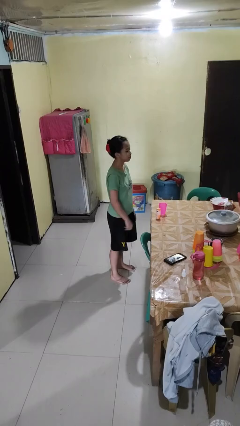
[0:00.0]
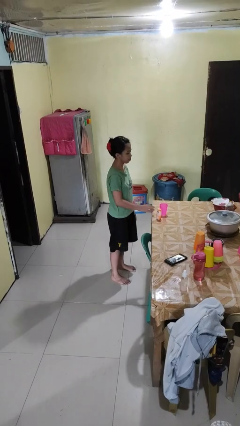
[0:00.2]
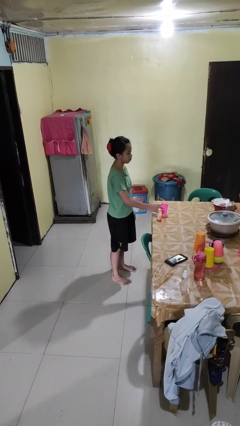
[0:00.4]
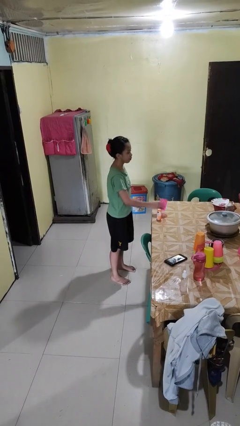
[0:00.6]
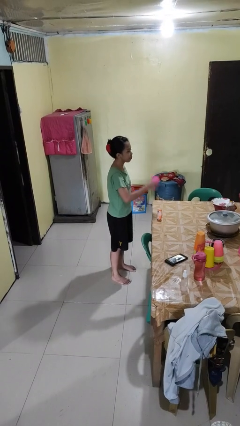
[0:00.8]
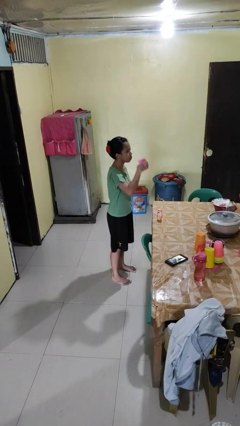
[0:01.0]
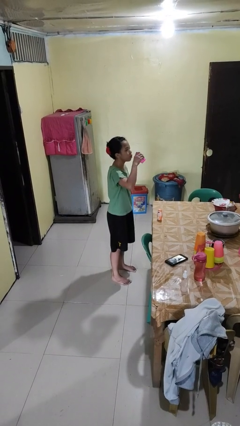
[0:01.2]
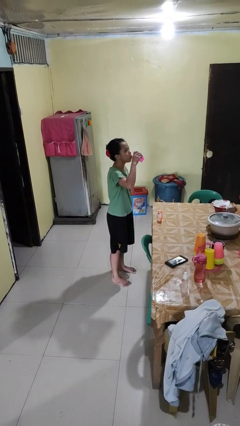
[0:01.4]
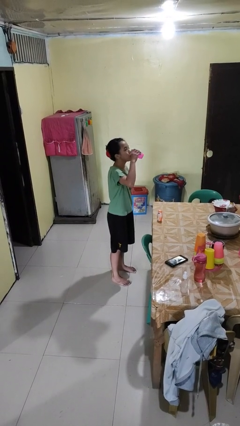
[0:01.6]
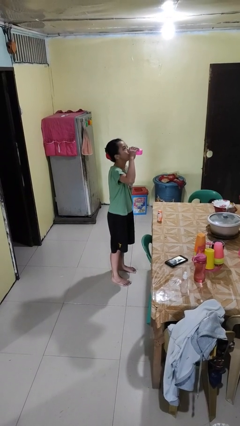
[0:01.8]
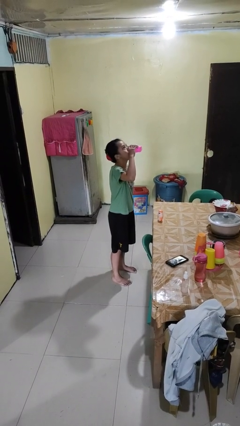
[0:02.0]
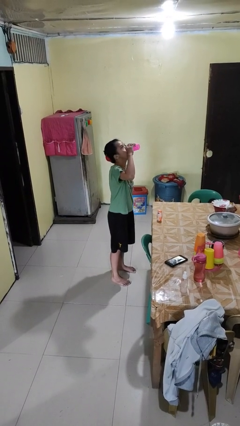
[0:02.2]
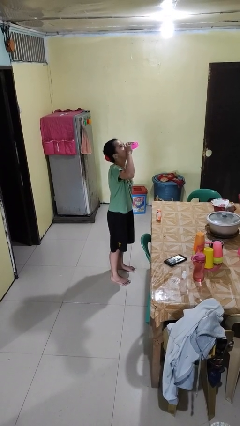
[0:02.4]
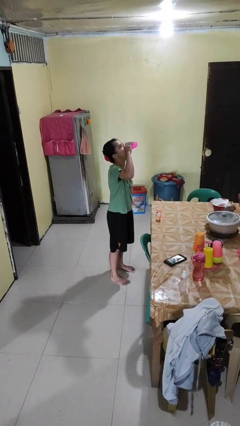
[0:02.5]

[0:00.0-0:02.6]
person drinks from cup

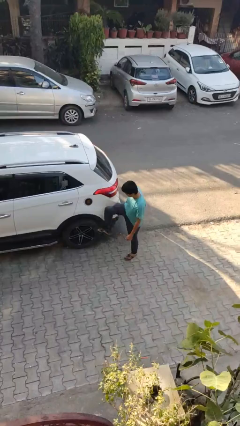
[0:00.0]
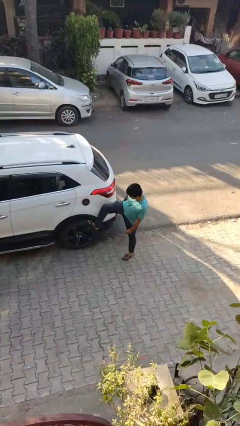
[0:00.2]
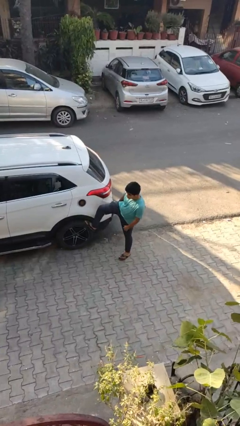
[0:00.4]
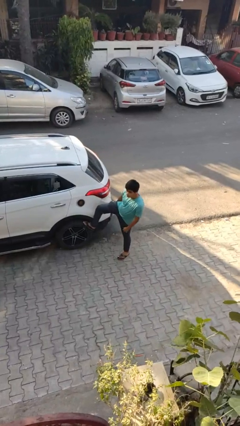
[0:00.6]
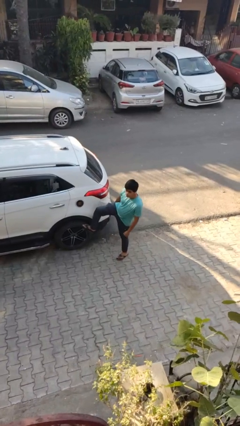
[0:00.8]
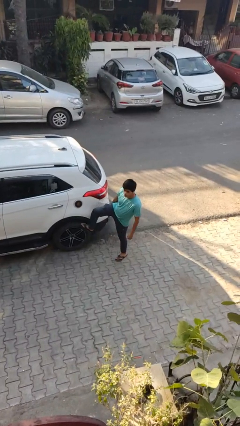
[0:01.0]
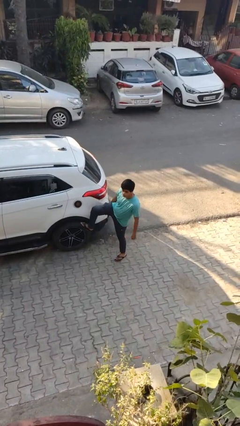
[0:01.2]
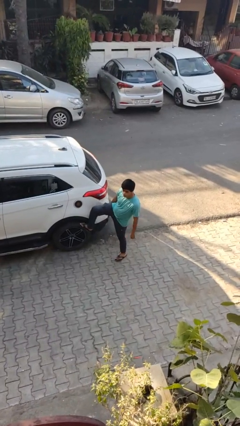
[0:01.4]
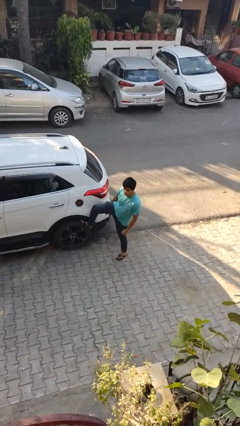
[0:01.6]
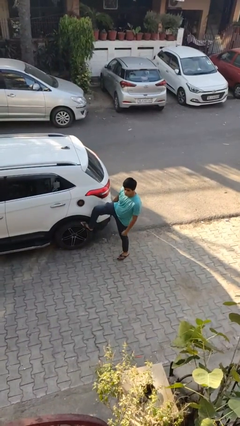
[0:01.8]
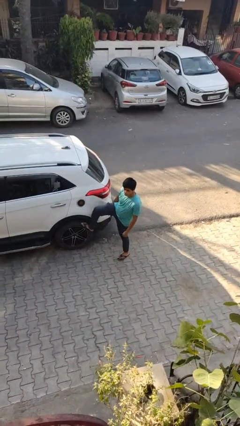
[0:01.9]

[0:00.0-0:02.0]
person kicks car tires

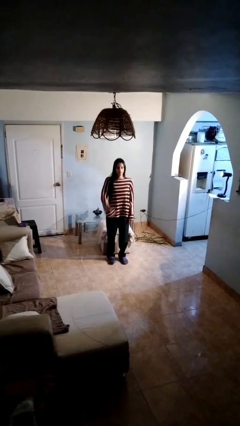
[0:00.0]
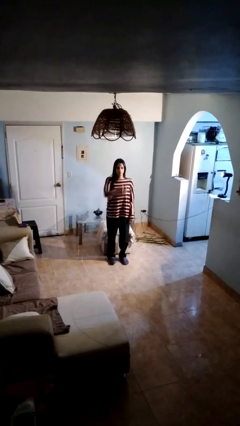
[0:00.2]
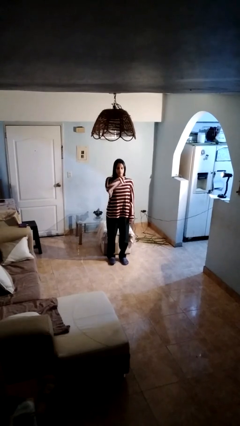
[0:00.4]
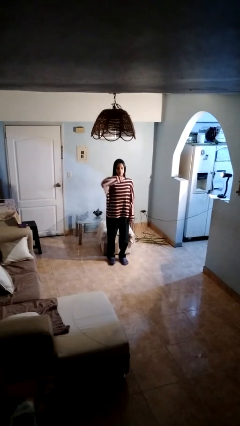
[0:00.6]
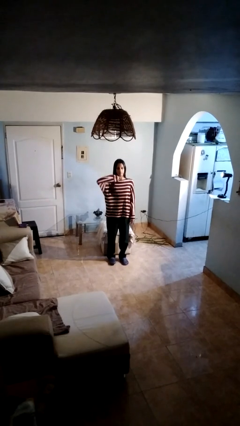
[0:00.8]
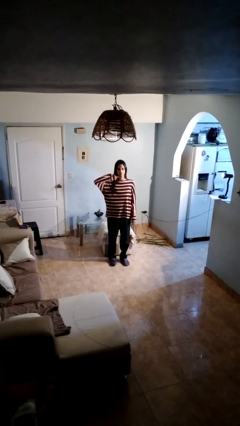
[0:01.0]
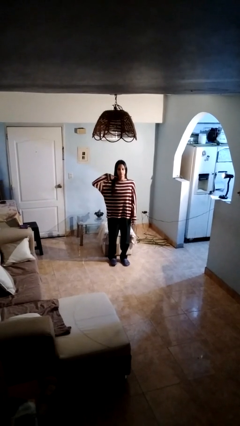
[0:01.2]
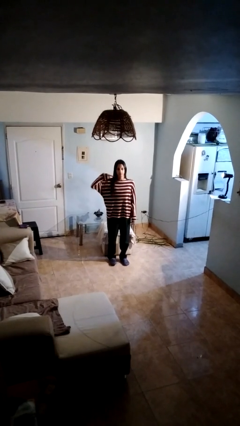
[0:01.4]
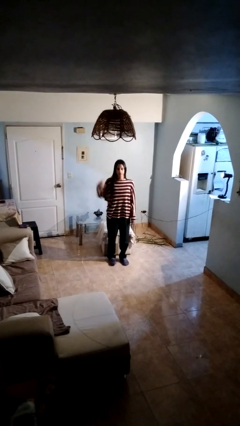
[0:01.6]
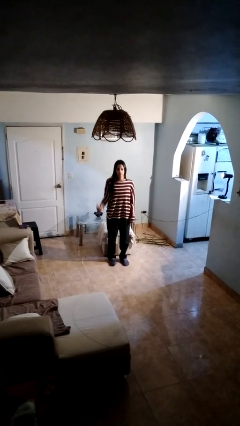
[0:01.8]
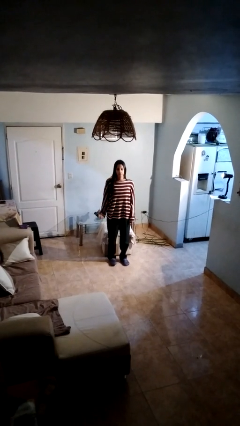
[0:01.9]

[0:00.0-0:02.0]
person gestures cut

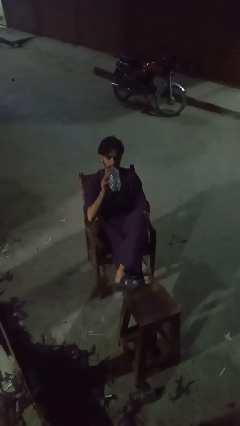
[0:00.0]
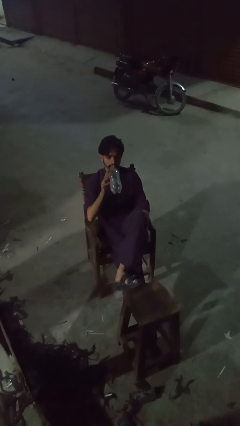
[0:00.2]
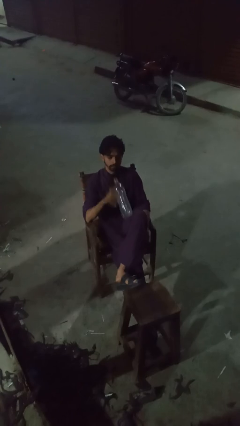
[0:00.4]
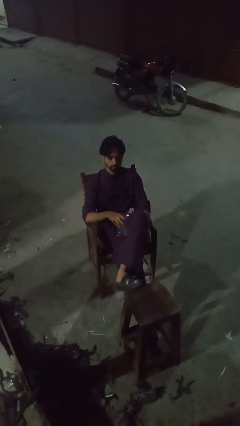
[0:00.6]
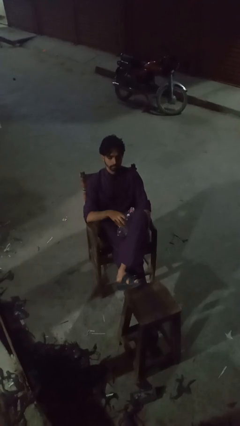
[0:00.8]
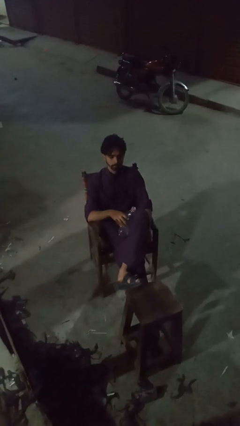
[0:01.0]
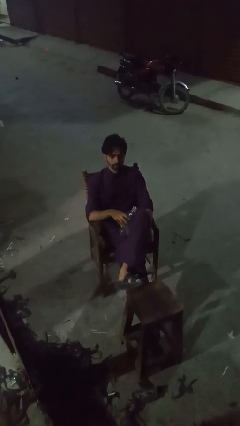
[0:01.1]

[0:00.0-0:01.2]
person drinks from bottle

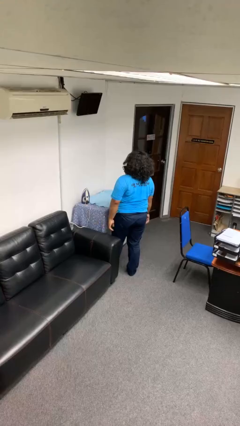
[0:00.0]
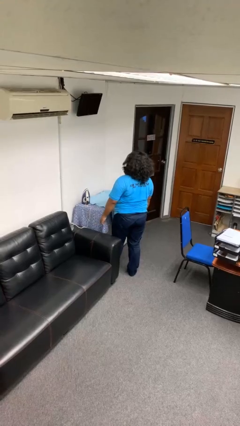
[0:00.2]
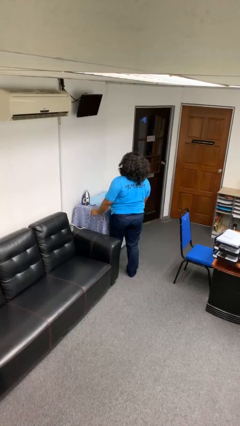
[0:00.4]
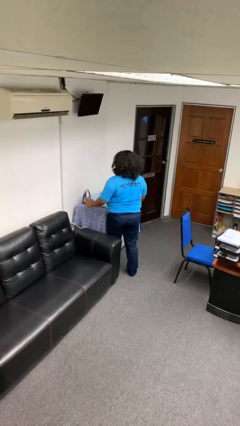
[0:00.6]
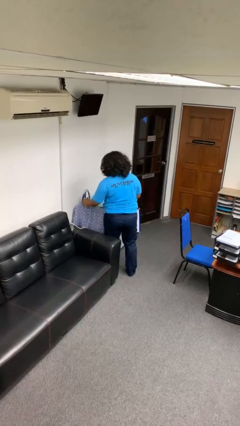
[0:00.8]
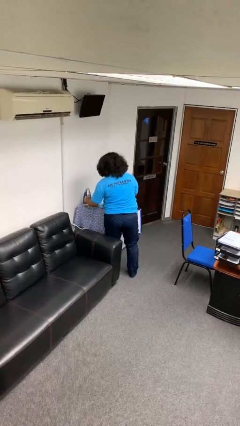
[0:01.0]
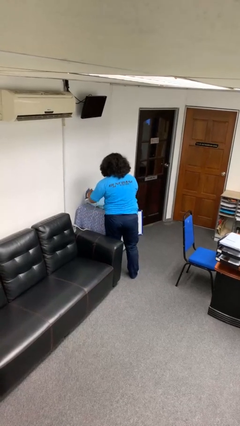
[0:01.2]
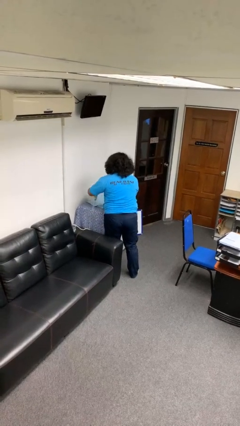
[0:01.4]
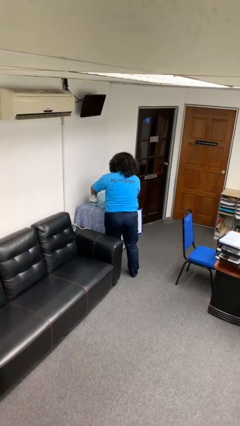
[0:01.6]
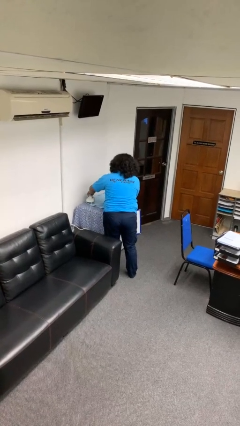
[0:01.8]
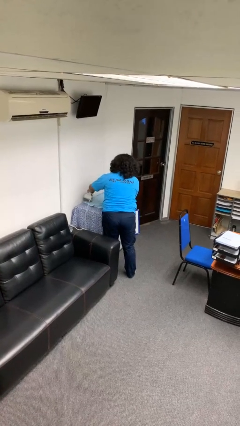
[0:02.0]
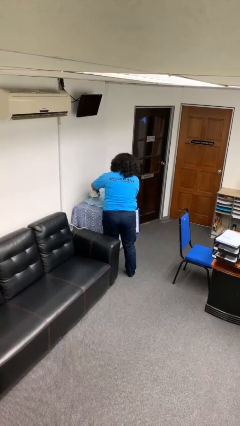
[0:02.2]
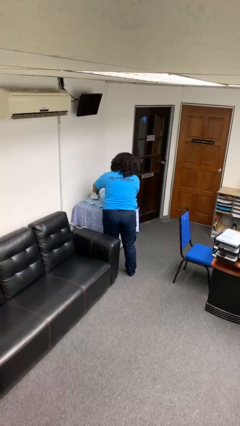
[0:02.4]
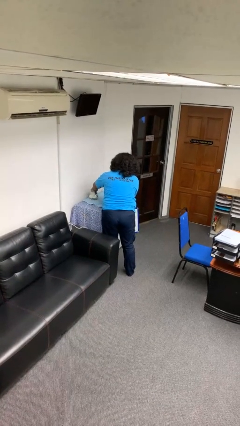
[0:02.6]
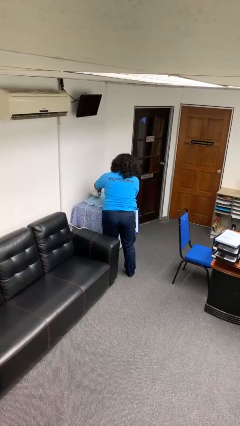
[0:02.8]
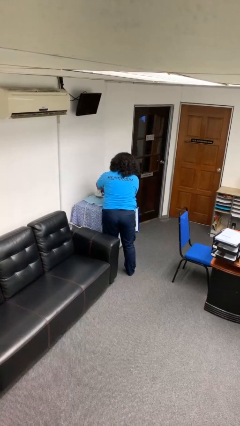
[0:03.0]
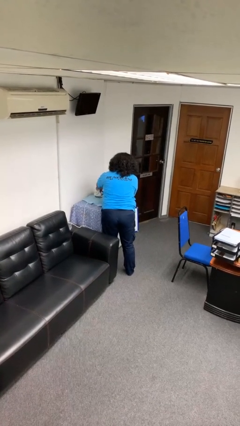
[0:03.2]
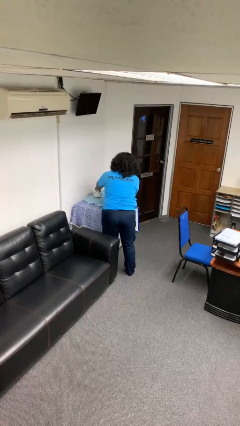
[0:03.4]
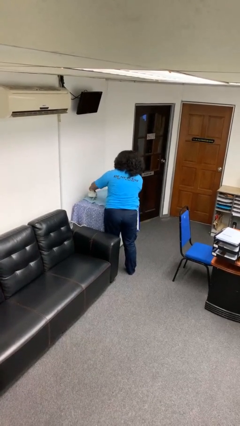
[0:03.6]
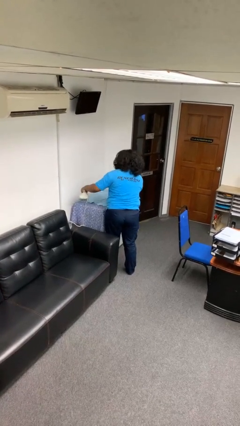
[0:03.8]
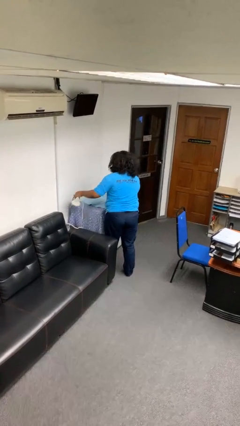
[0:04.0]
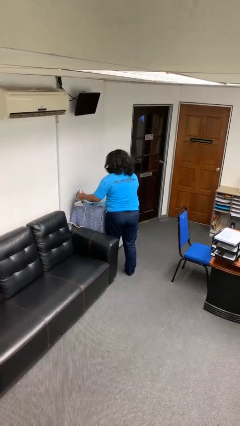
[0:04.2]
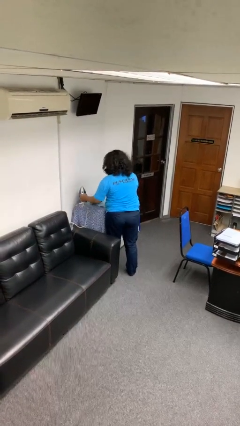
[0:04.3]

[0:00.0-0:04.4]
person irons clothes

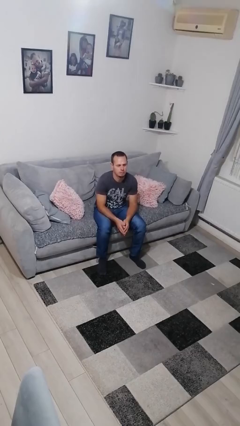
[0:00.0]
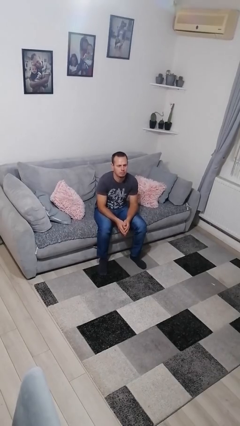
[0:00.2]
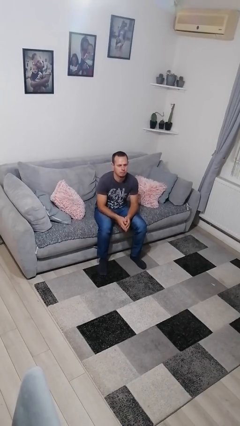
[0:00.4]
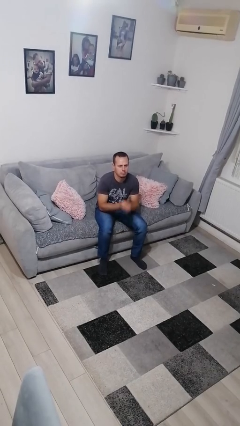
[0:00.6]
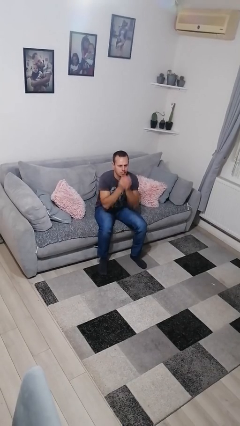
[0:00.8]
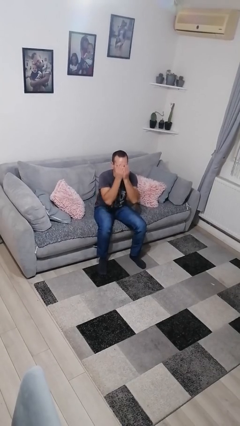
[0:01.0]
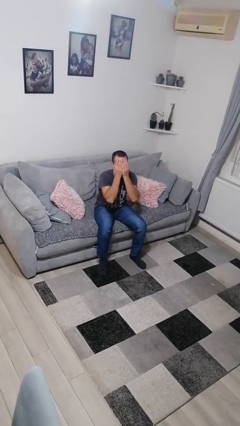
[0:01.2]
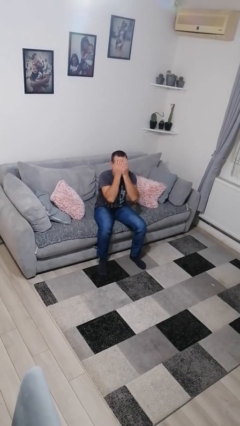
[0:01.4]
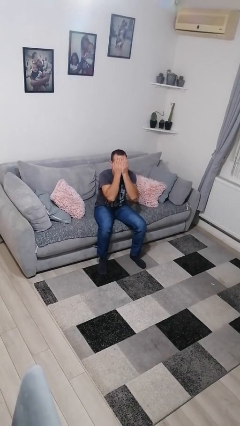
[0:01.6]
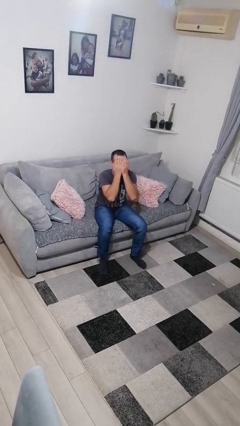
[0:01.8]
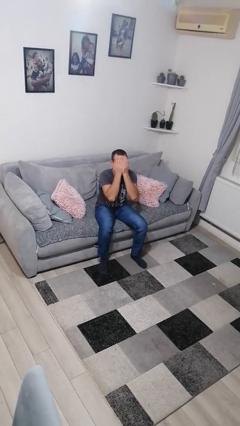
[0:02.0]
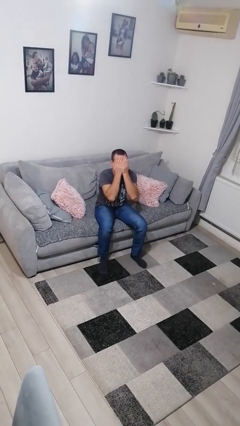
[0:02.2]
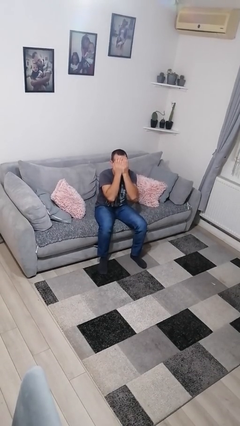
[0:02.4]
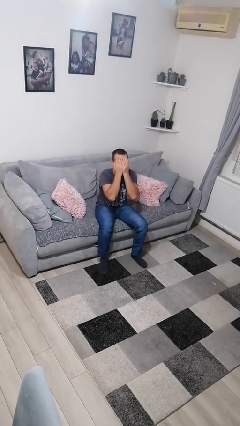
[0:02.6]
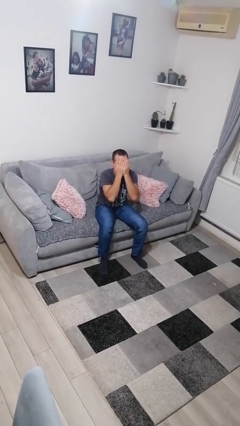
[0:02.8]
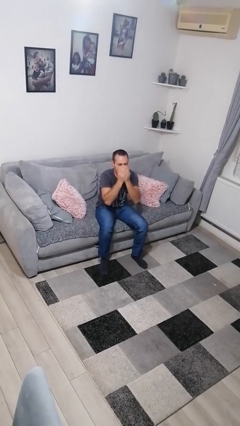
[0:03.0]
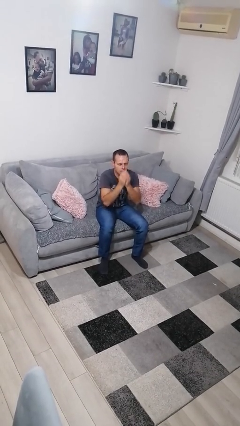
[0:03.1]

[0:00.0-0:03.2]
person covers face with hands

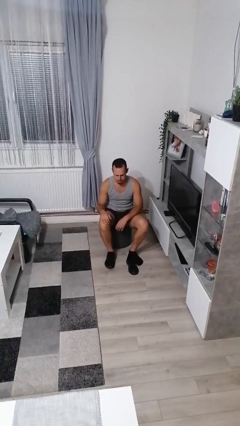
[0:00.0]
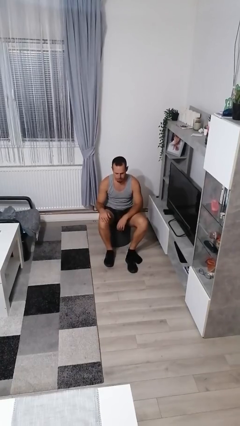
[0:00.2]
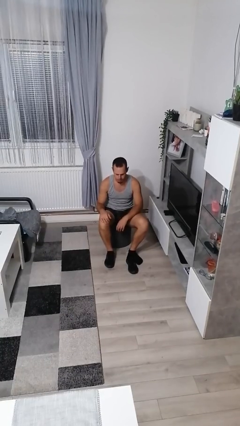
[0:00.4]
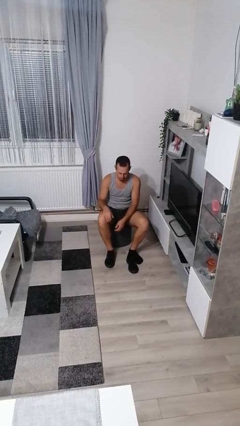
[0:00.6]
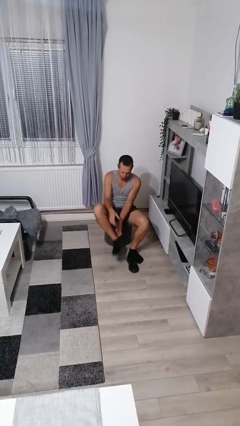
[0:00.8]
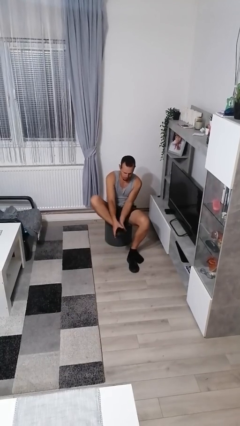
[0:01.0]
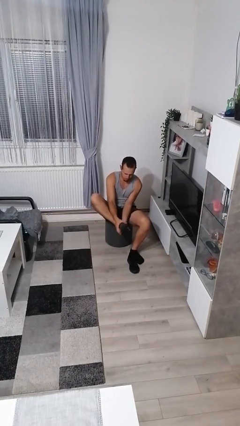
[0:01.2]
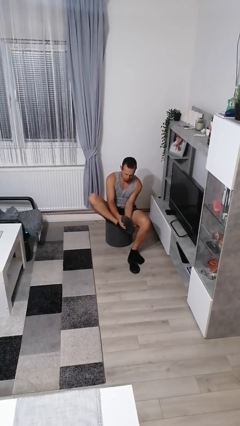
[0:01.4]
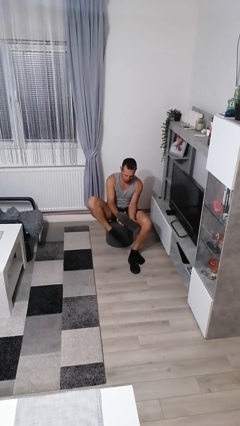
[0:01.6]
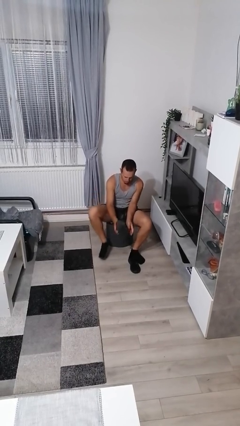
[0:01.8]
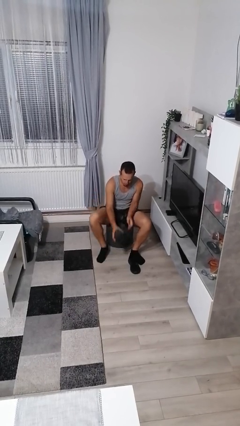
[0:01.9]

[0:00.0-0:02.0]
person takes off shoes

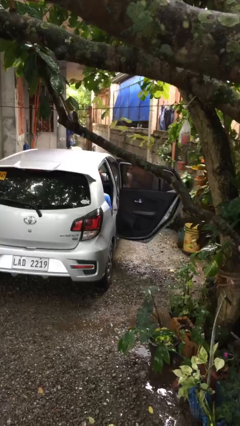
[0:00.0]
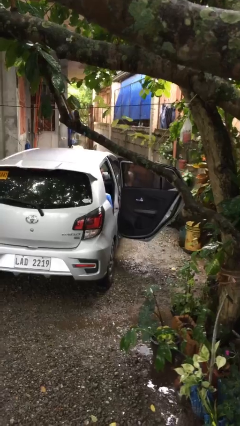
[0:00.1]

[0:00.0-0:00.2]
person exits car
